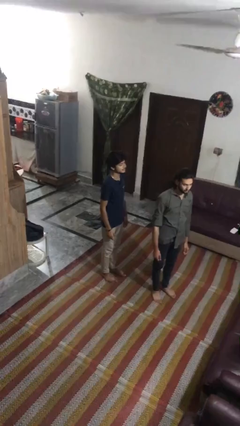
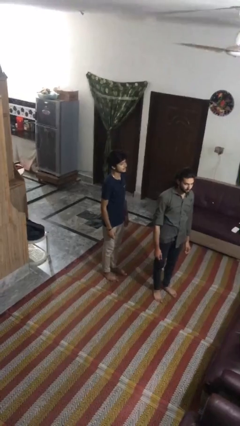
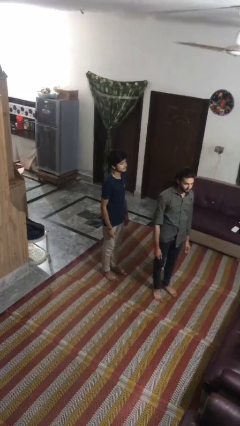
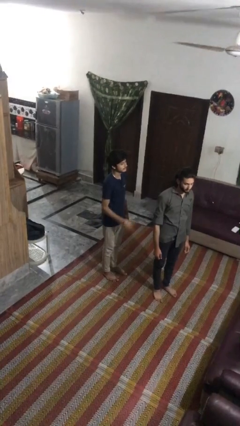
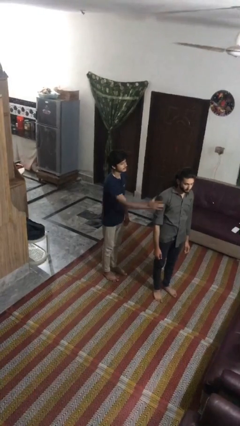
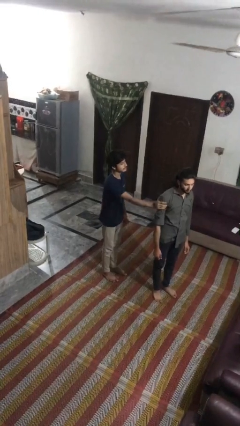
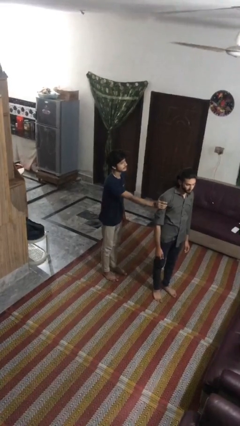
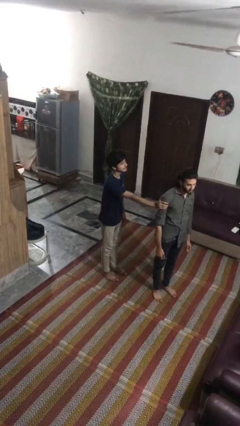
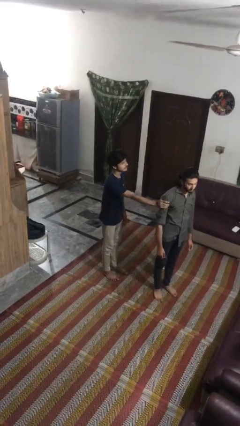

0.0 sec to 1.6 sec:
person grabs person by shoulder

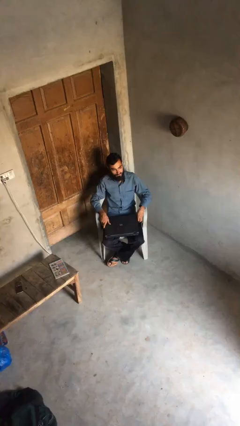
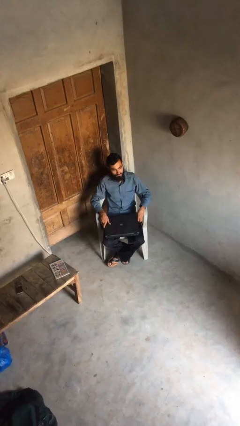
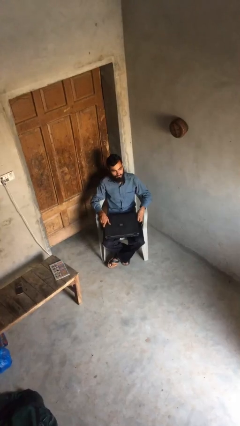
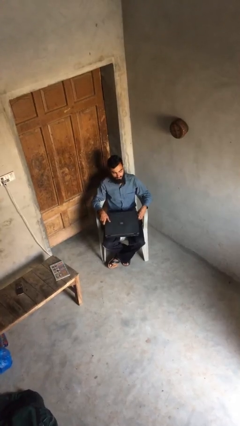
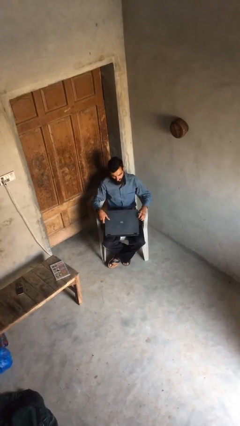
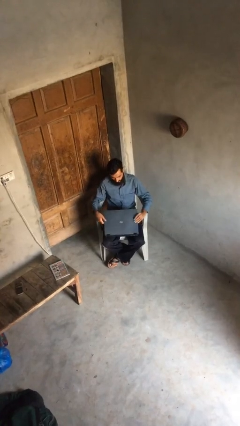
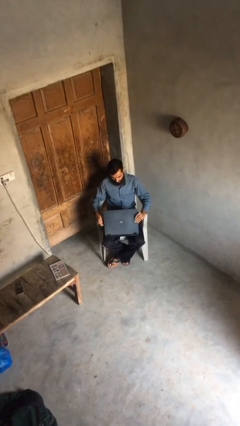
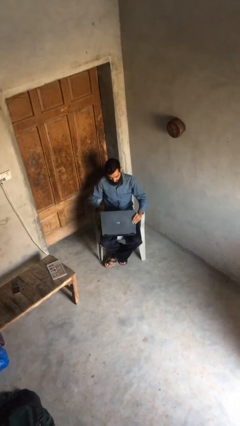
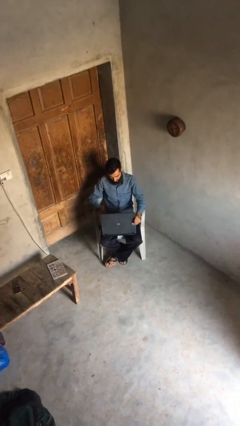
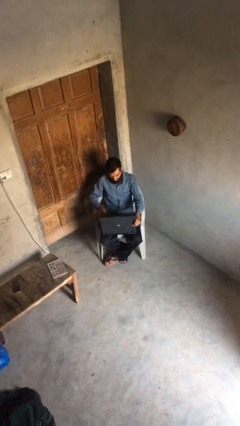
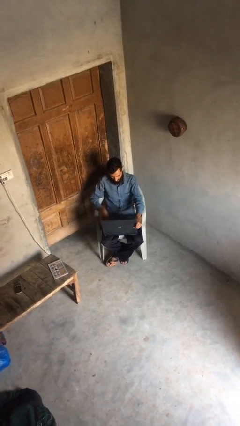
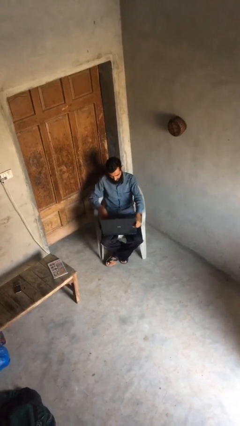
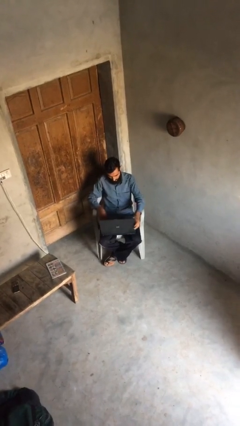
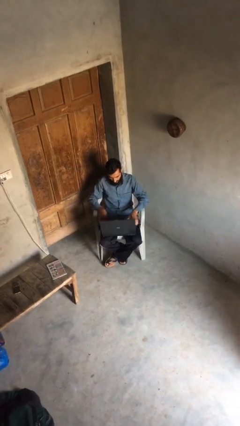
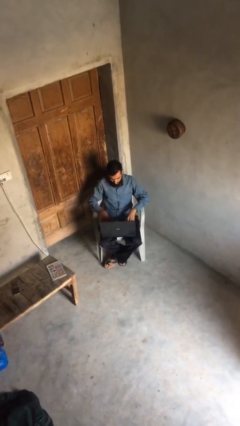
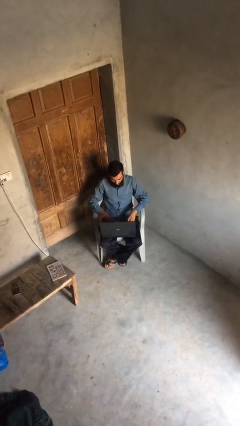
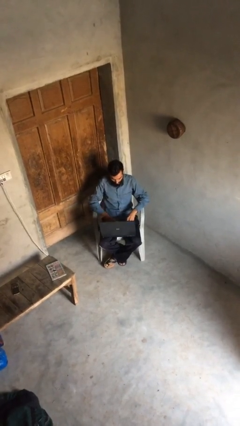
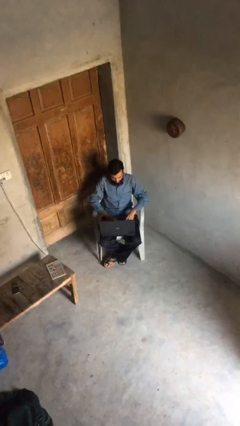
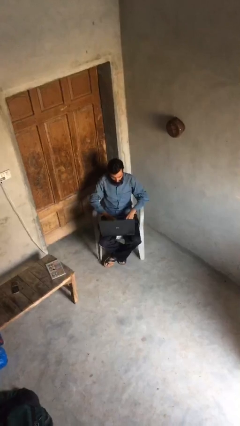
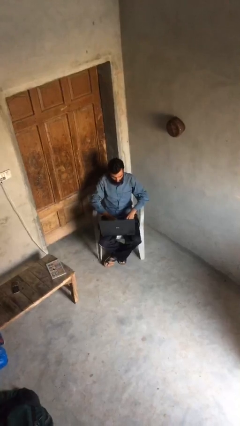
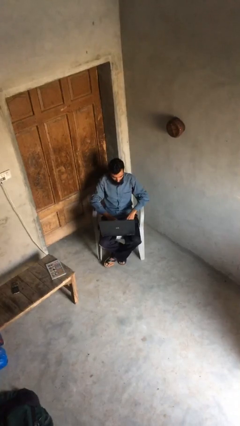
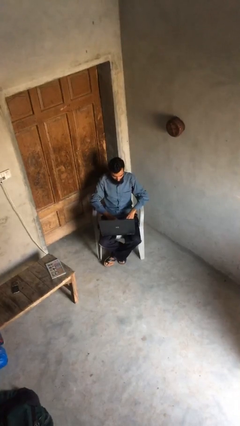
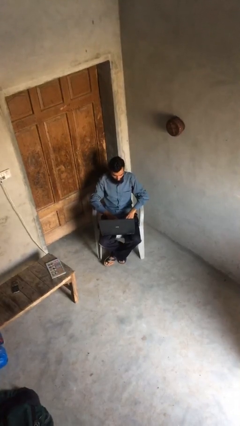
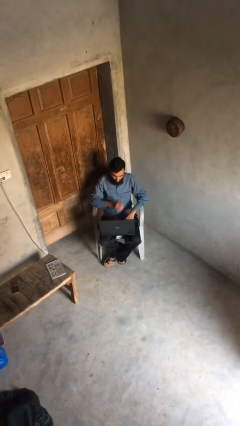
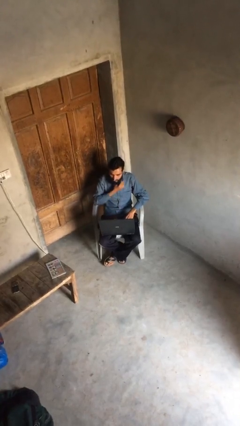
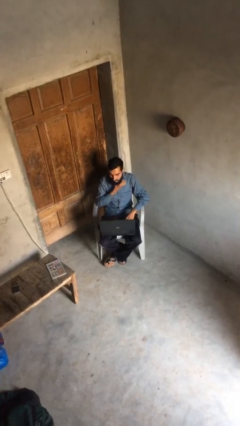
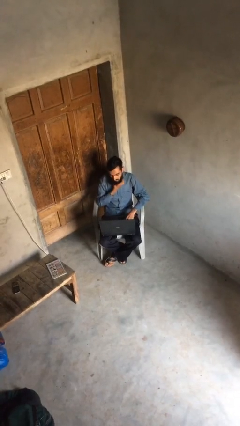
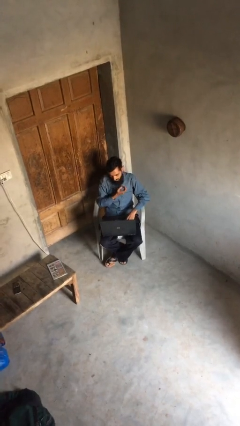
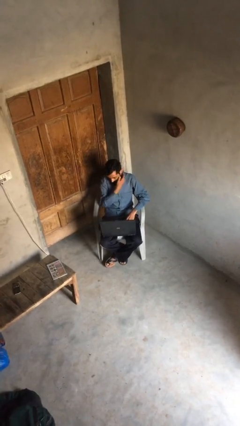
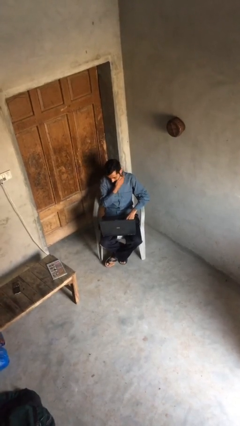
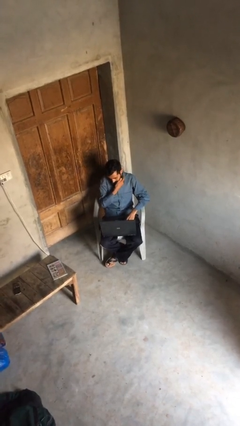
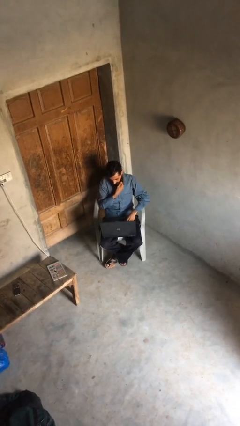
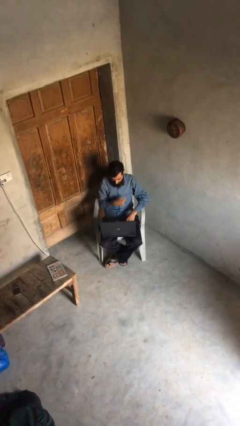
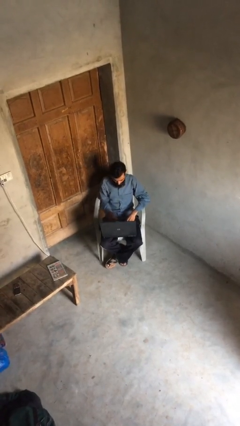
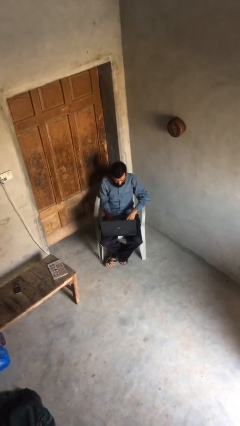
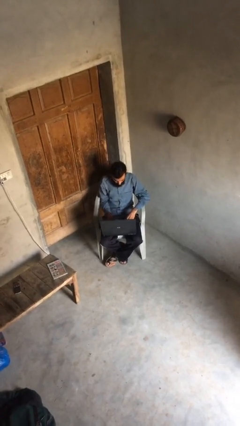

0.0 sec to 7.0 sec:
person interacts with laptop

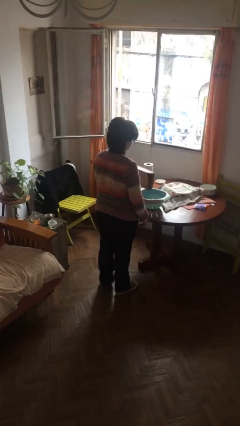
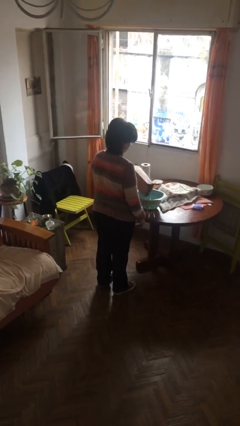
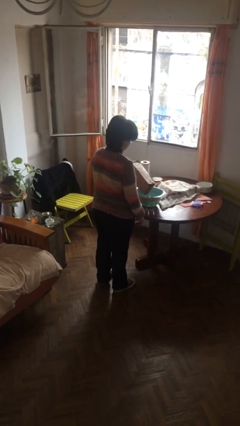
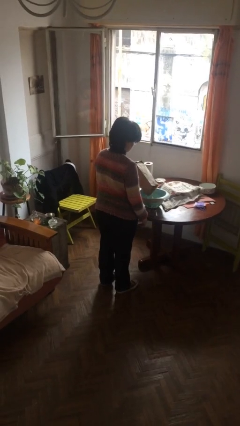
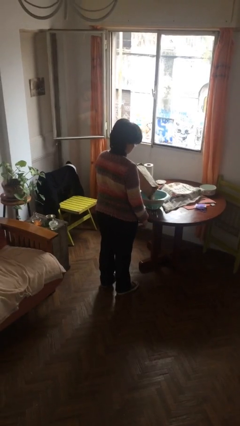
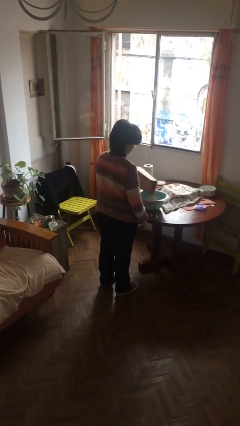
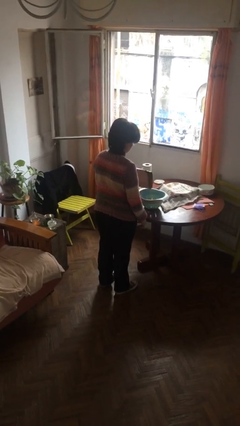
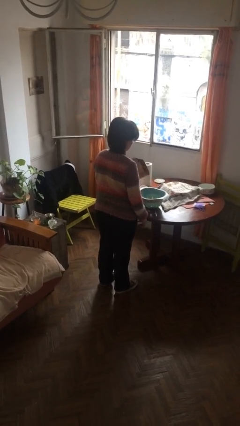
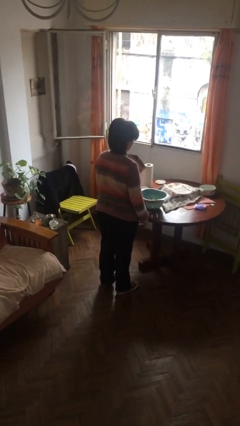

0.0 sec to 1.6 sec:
person pours into bowl

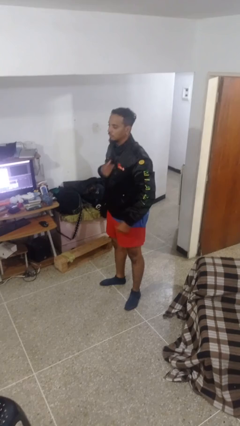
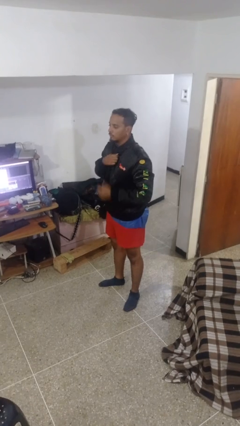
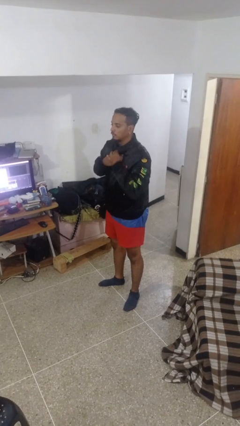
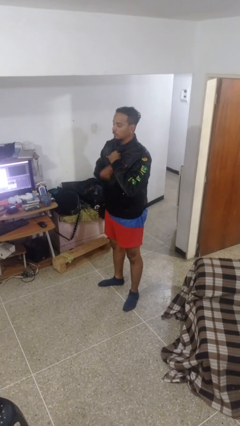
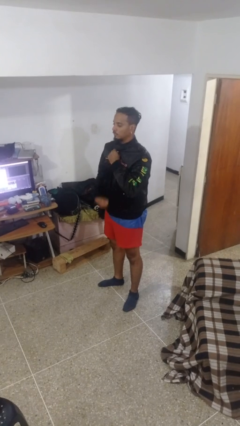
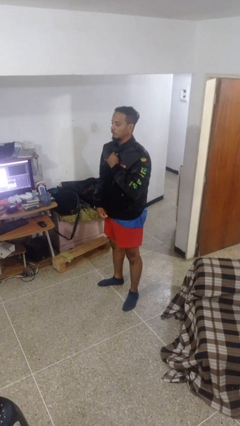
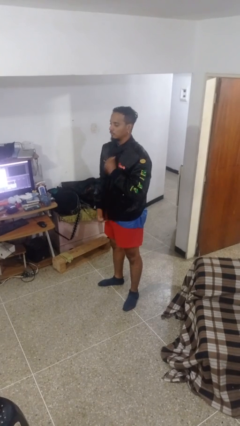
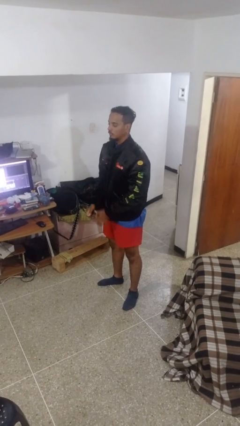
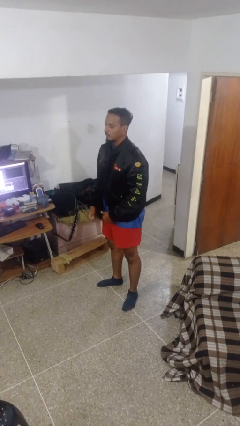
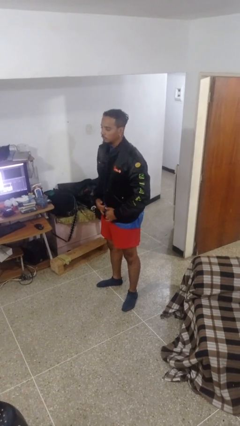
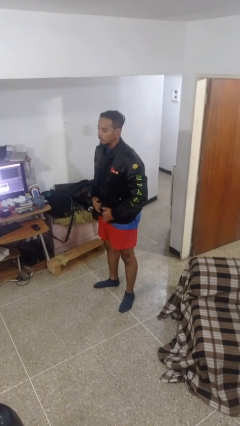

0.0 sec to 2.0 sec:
person unzips jacket

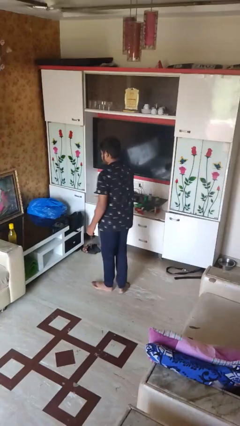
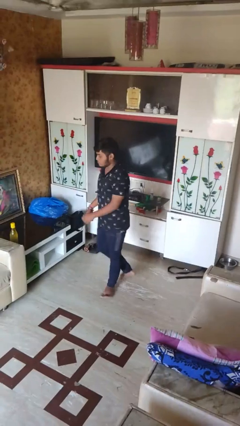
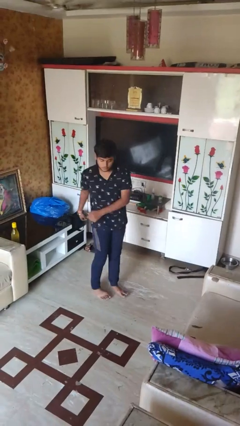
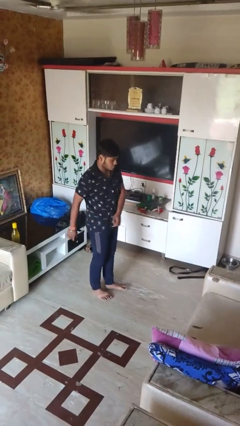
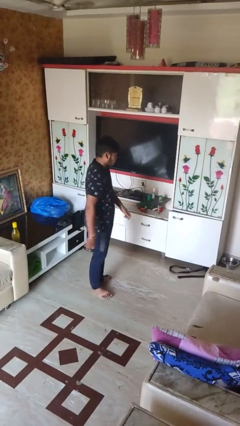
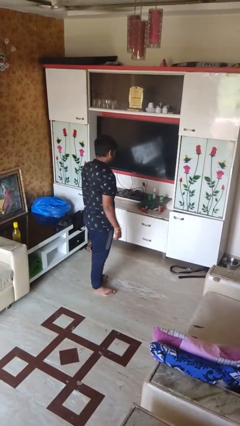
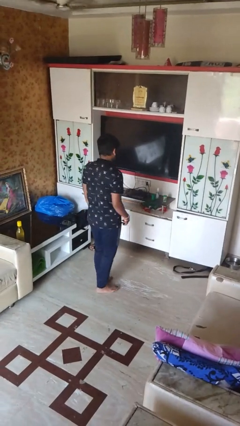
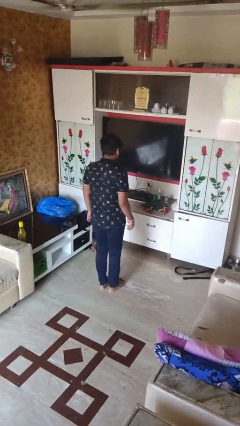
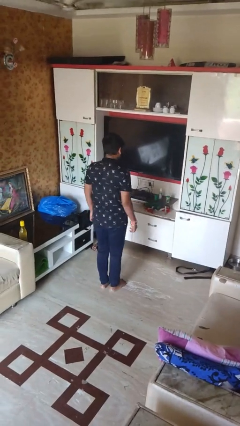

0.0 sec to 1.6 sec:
person twirls

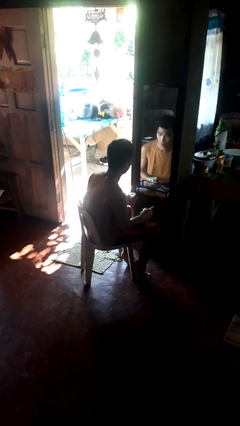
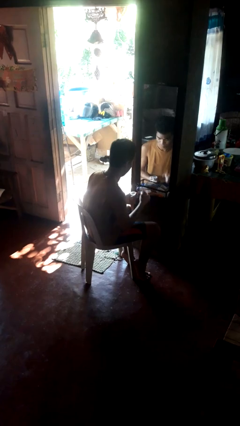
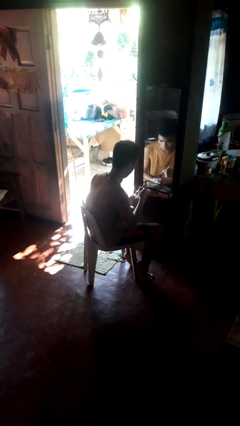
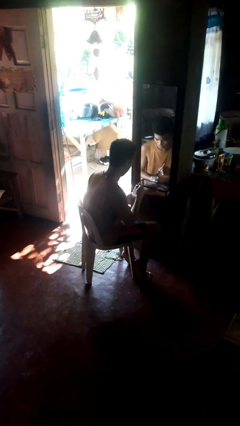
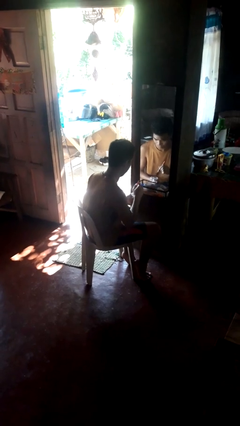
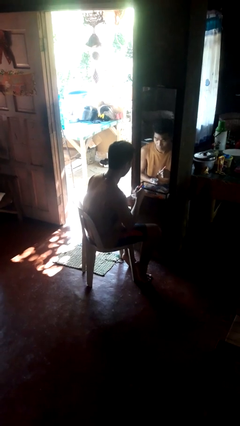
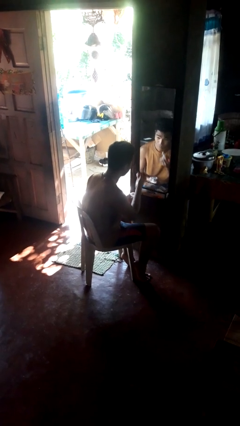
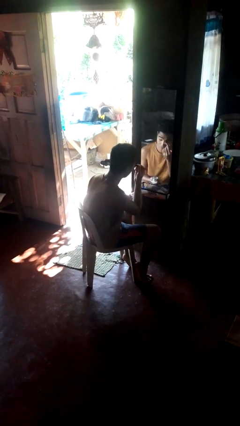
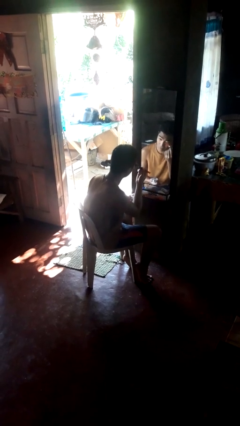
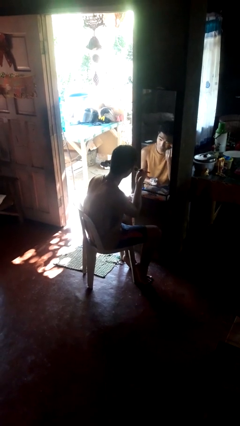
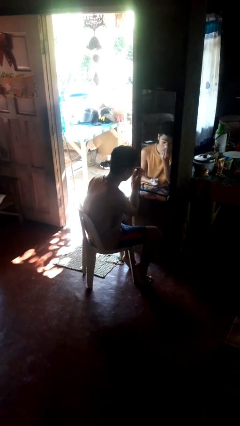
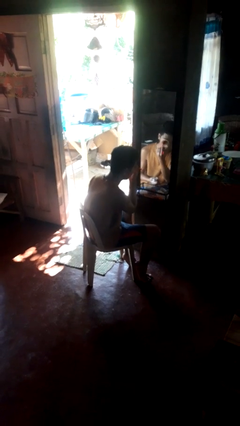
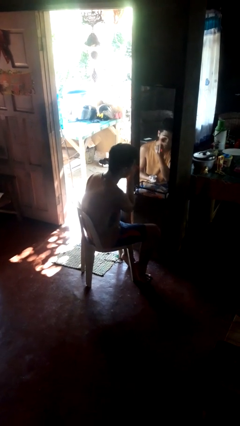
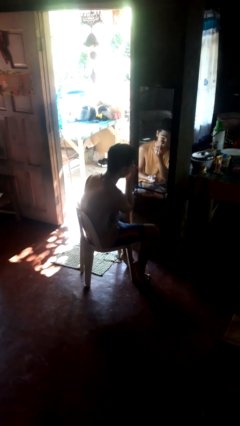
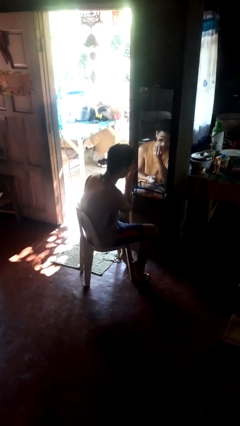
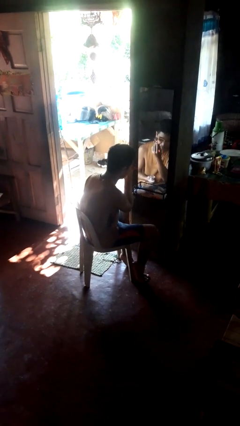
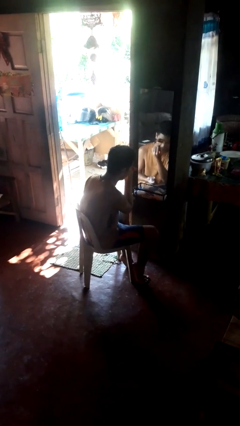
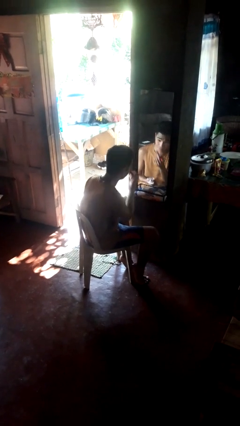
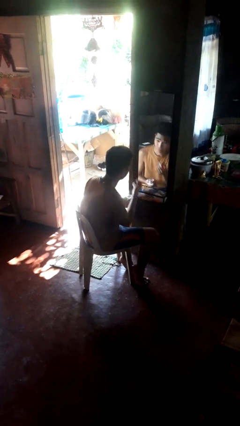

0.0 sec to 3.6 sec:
person applies eye makeup

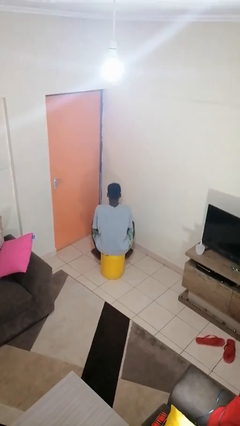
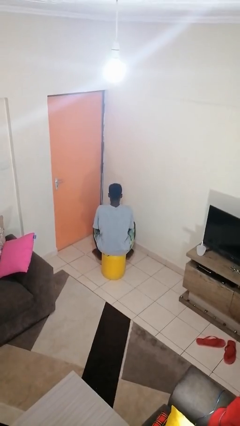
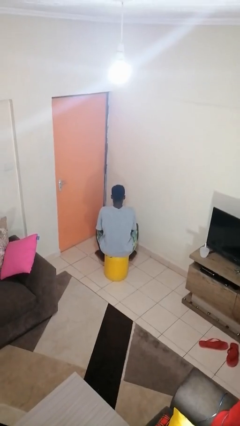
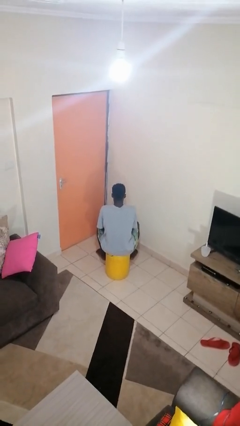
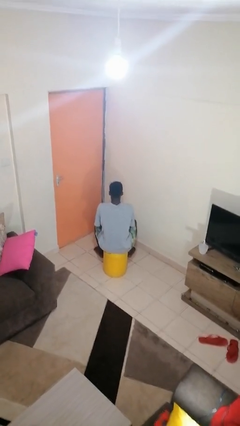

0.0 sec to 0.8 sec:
person drinks from mug
